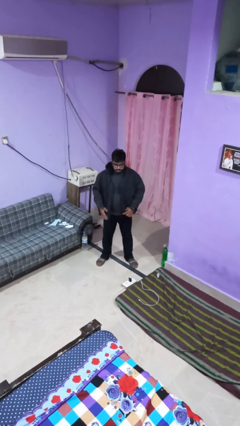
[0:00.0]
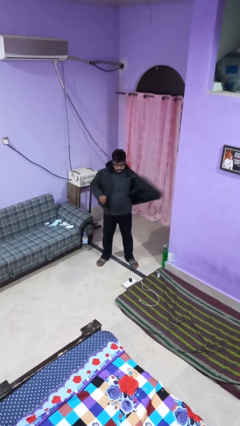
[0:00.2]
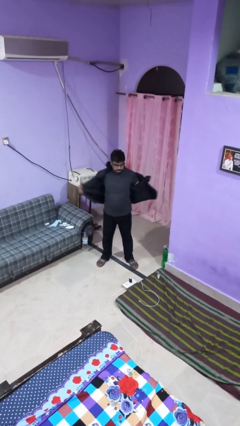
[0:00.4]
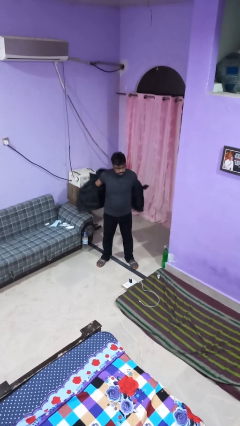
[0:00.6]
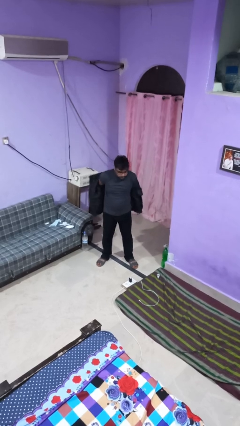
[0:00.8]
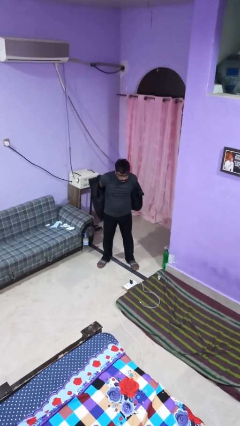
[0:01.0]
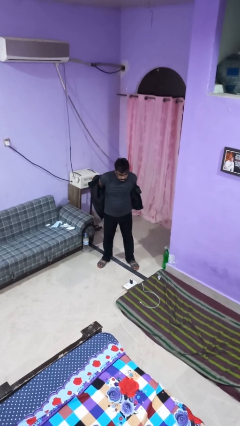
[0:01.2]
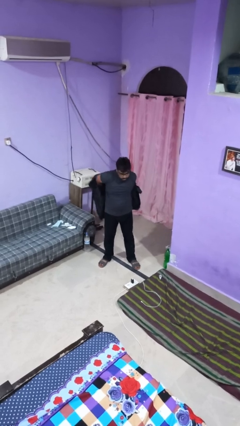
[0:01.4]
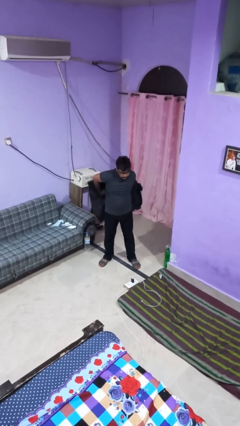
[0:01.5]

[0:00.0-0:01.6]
person takes off jacket

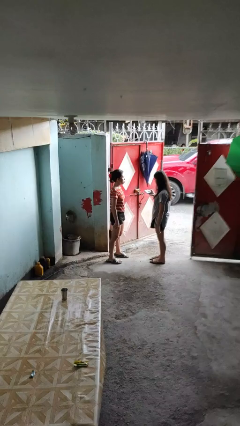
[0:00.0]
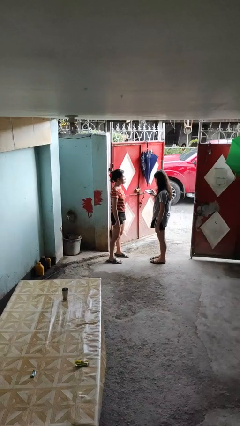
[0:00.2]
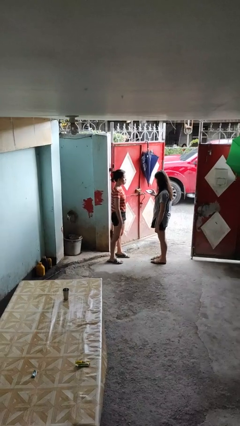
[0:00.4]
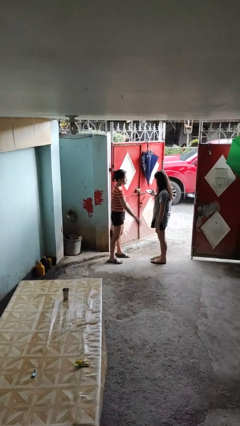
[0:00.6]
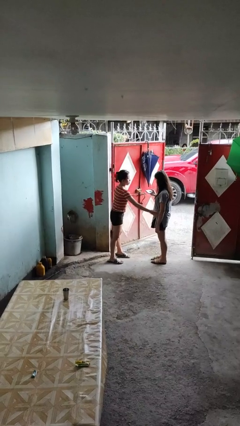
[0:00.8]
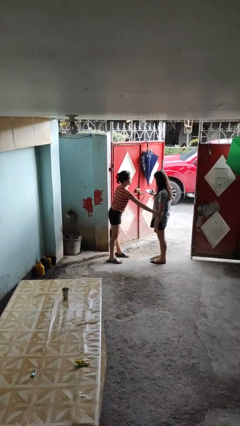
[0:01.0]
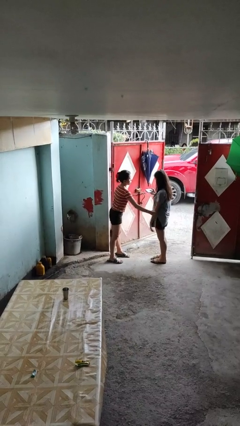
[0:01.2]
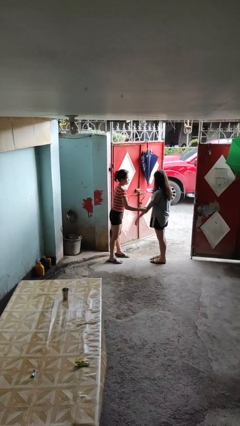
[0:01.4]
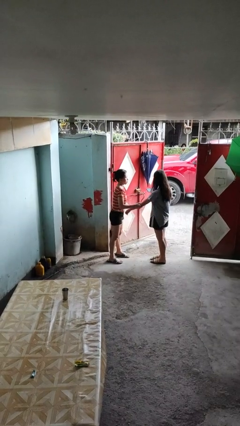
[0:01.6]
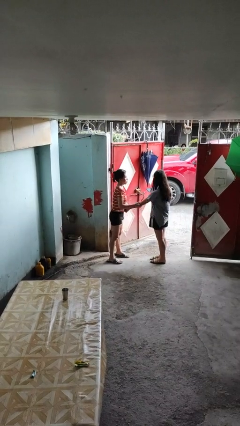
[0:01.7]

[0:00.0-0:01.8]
person grabs person by forearm

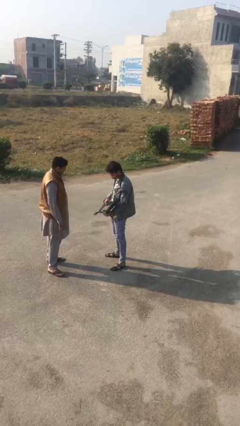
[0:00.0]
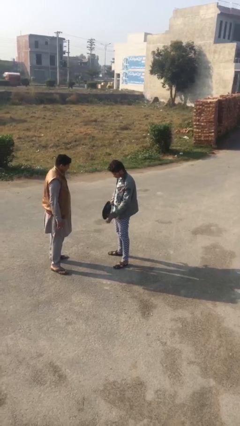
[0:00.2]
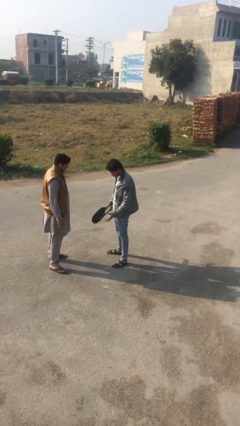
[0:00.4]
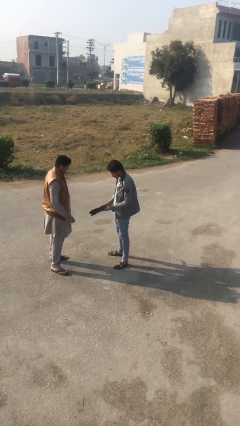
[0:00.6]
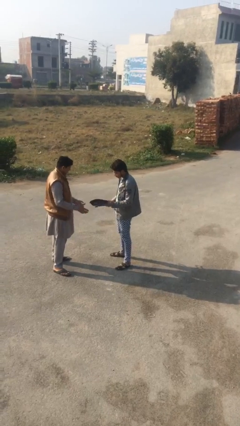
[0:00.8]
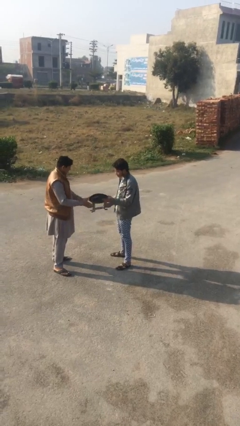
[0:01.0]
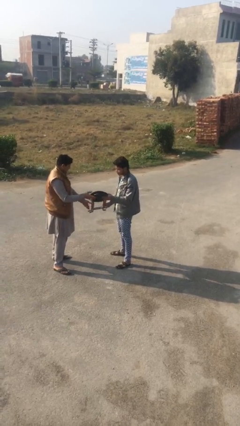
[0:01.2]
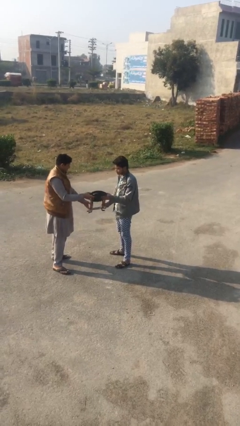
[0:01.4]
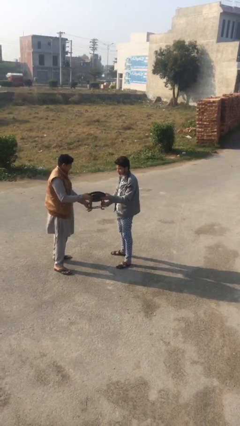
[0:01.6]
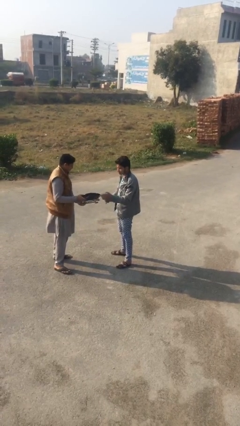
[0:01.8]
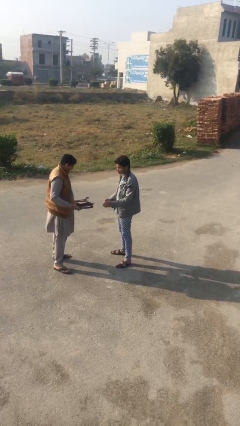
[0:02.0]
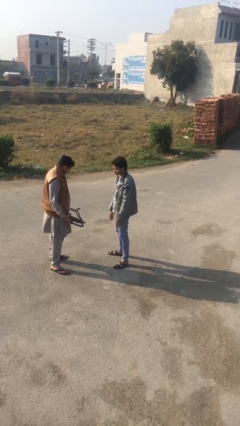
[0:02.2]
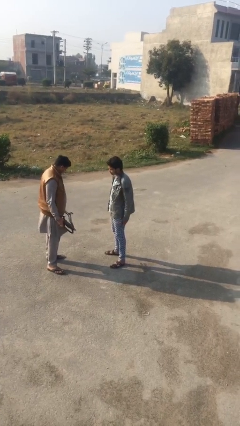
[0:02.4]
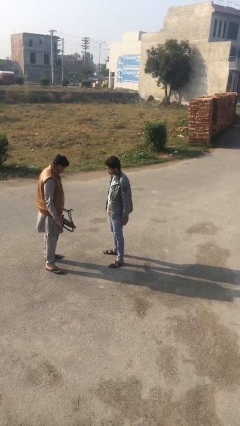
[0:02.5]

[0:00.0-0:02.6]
person transfers object to person

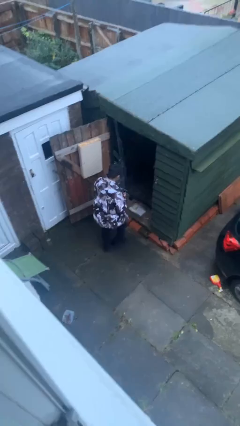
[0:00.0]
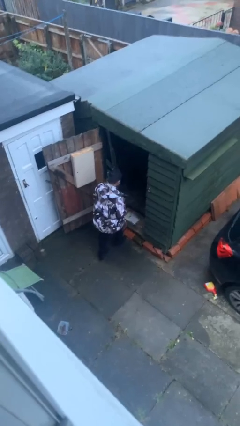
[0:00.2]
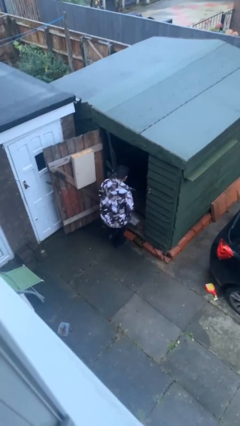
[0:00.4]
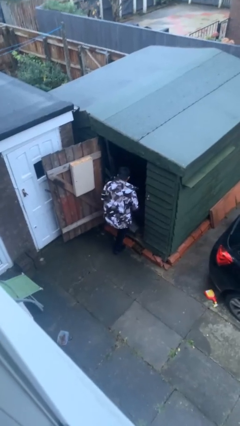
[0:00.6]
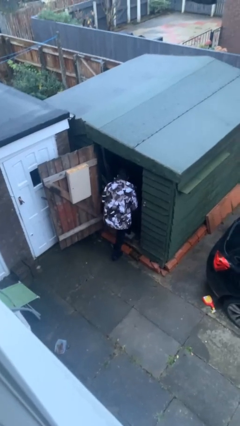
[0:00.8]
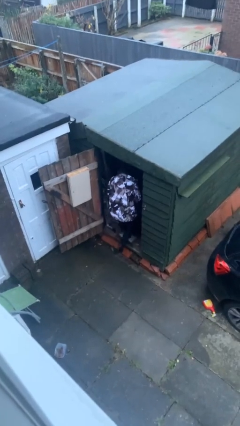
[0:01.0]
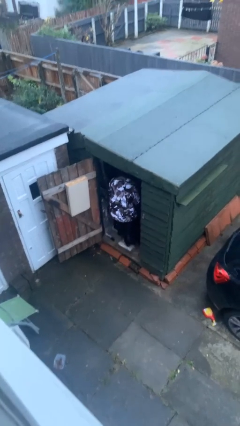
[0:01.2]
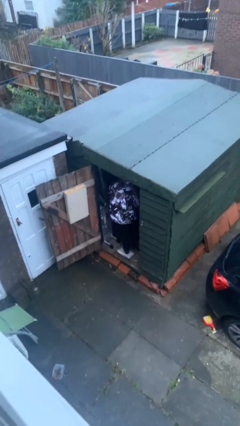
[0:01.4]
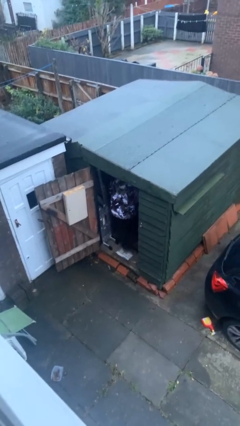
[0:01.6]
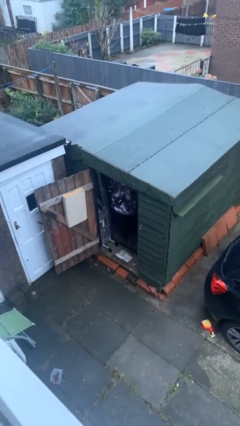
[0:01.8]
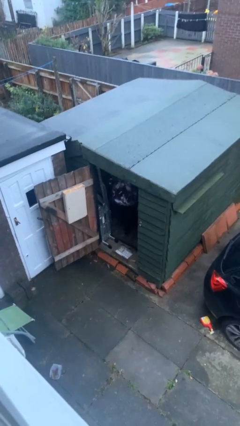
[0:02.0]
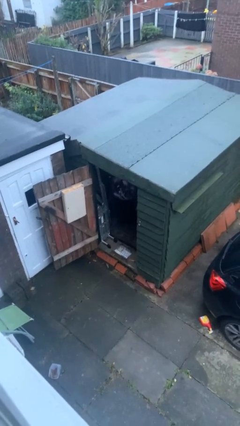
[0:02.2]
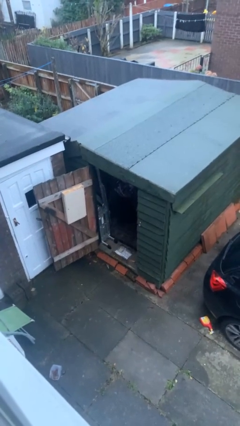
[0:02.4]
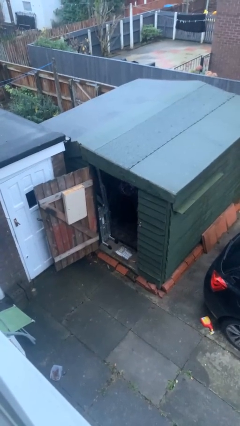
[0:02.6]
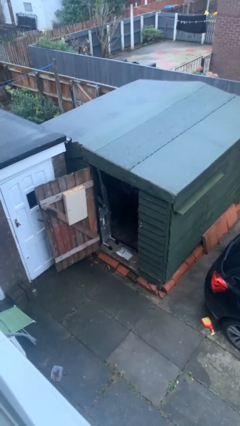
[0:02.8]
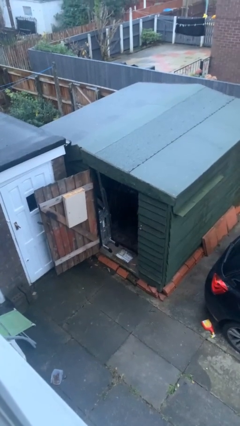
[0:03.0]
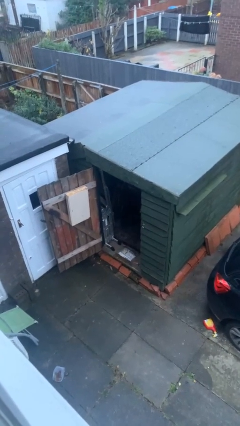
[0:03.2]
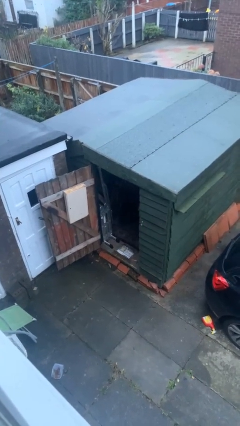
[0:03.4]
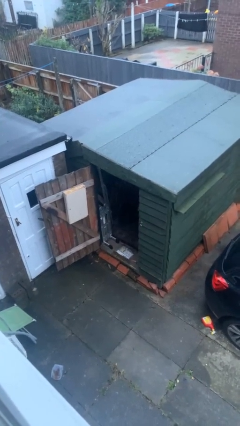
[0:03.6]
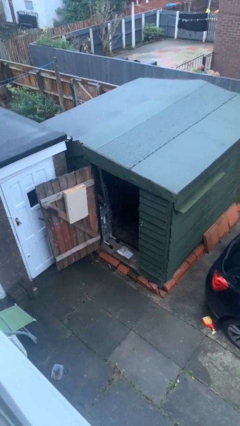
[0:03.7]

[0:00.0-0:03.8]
person exits scene through structure

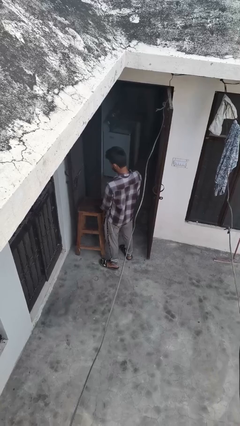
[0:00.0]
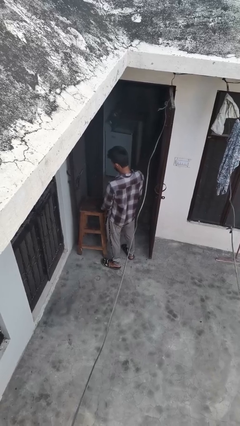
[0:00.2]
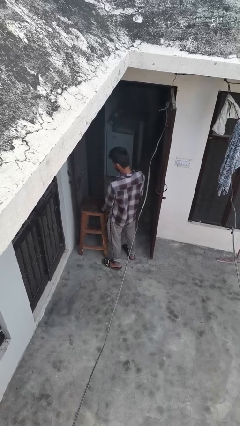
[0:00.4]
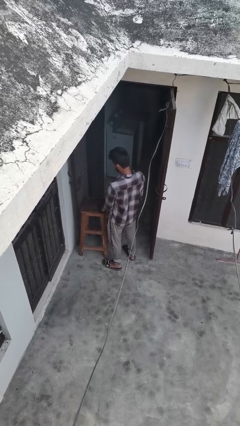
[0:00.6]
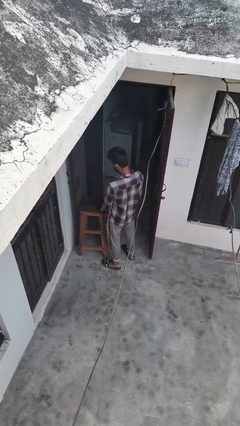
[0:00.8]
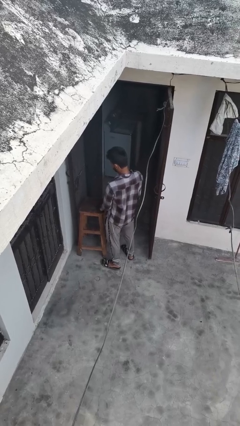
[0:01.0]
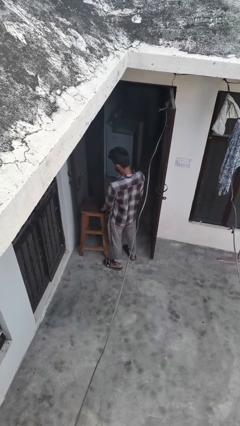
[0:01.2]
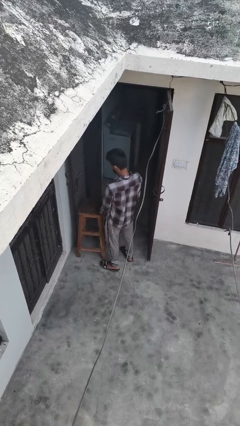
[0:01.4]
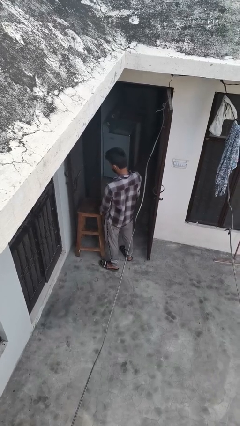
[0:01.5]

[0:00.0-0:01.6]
person taps object with finger

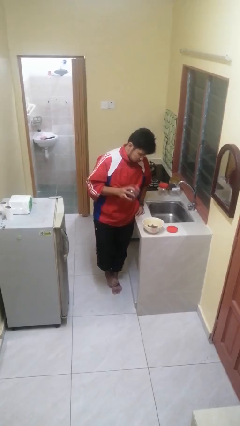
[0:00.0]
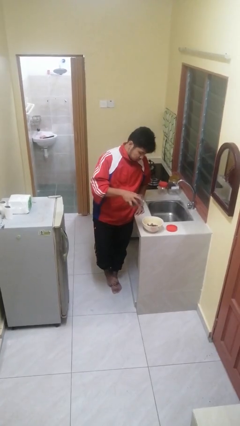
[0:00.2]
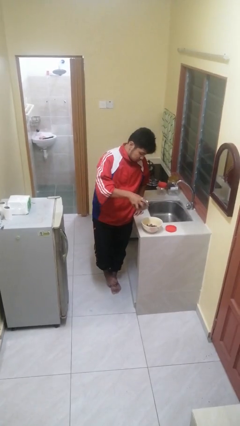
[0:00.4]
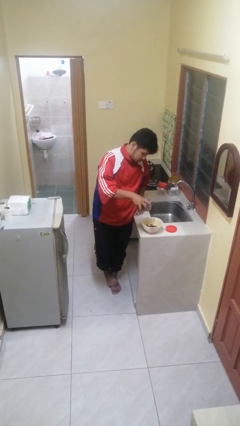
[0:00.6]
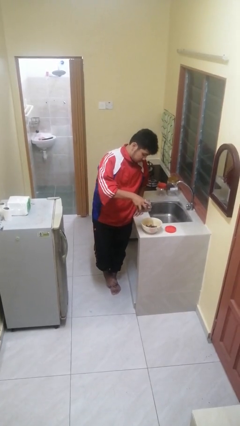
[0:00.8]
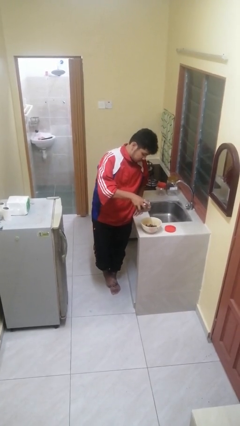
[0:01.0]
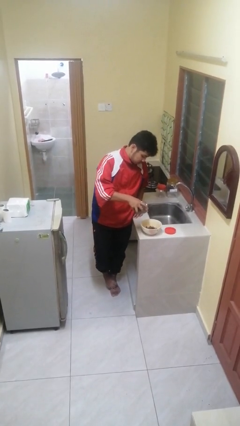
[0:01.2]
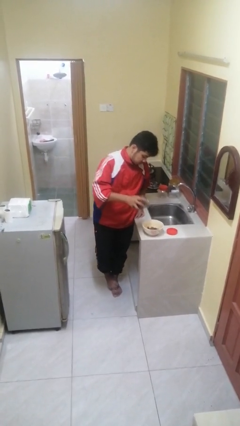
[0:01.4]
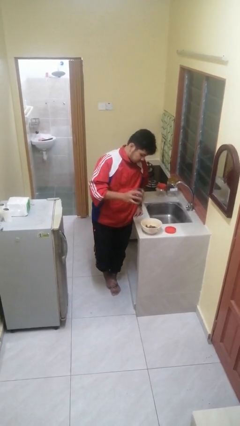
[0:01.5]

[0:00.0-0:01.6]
person pours into bowl

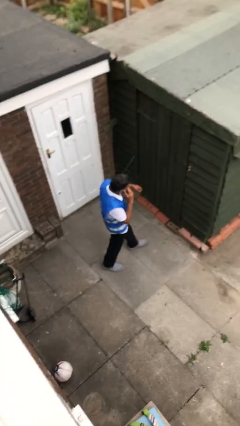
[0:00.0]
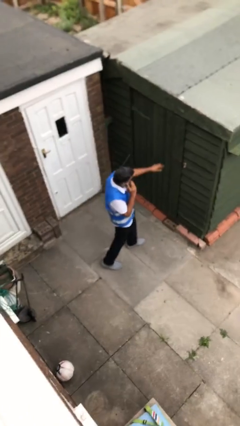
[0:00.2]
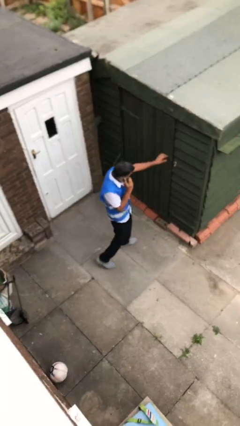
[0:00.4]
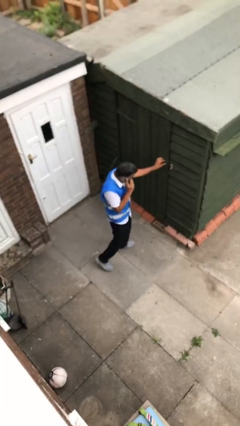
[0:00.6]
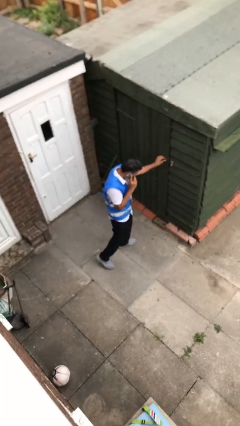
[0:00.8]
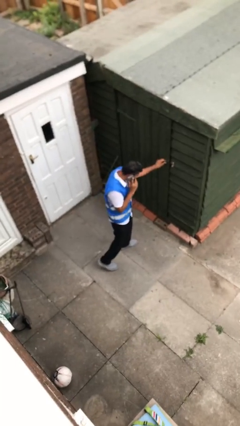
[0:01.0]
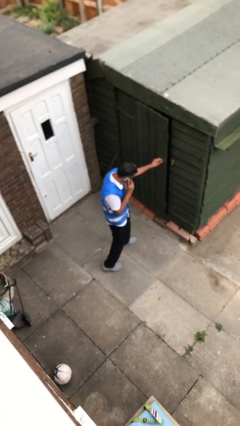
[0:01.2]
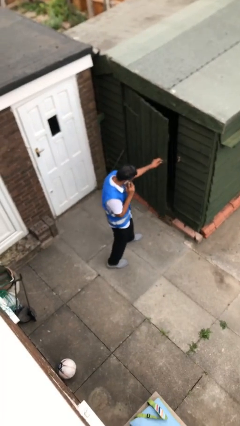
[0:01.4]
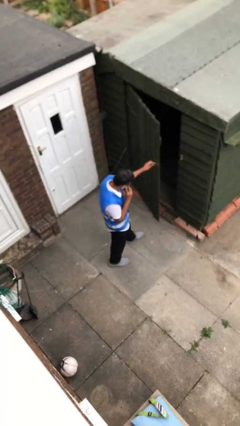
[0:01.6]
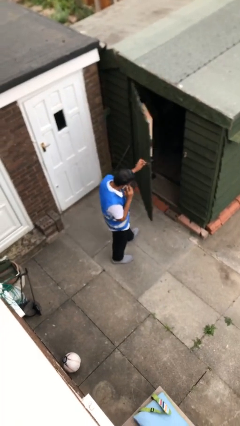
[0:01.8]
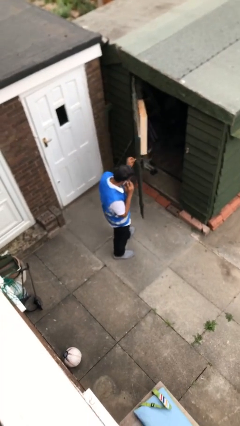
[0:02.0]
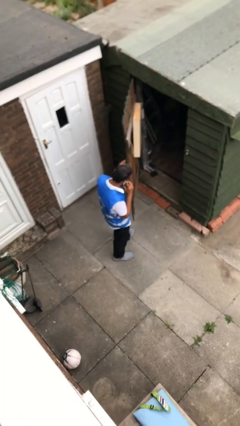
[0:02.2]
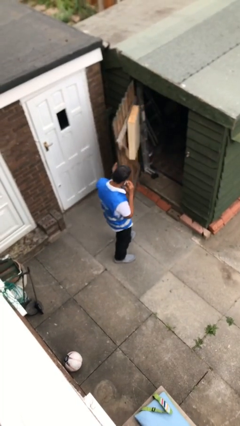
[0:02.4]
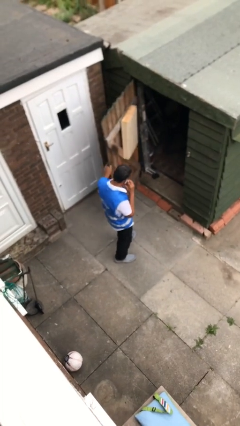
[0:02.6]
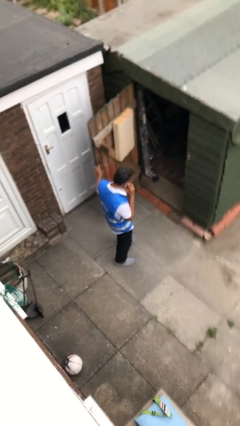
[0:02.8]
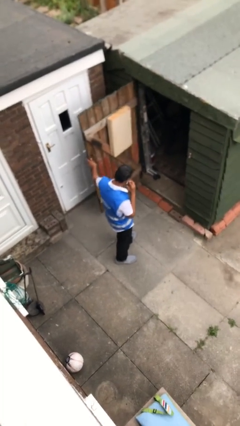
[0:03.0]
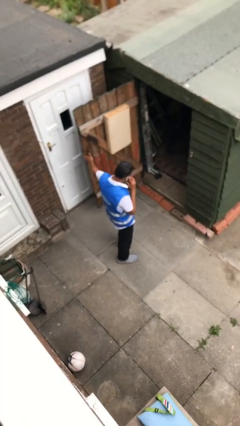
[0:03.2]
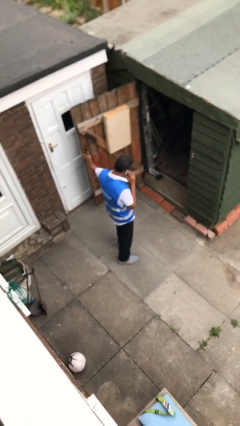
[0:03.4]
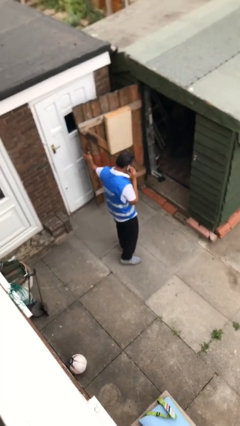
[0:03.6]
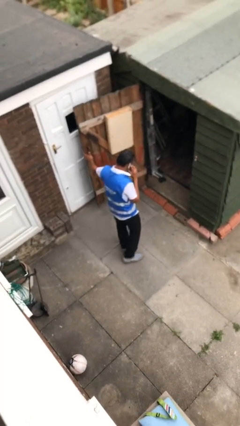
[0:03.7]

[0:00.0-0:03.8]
person opens facility door

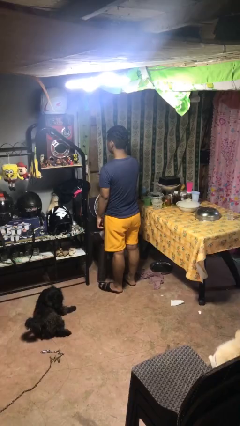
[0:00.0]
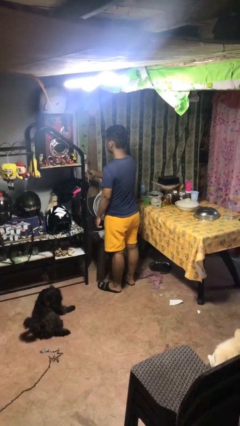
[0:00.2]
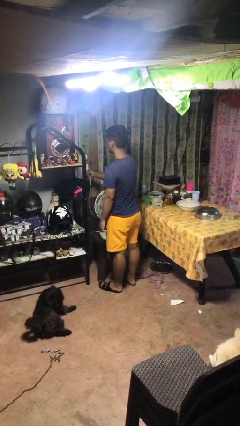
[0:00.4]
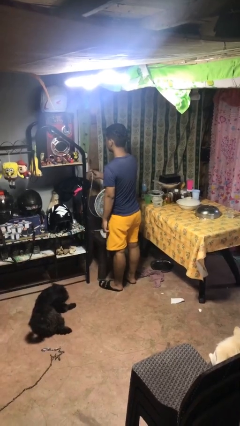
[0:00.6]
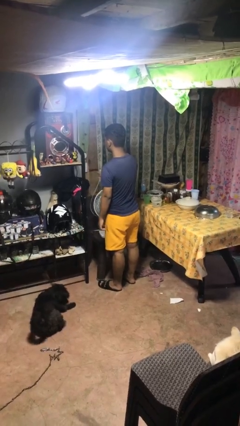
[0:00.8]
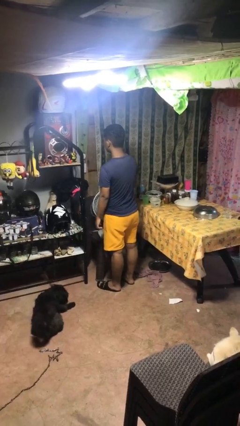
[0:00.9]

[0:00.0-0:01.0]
person unplugs from electrical socket
